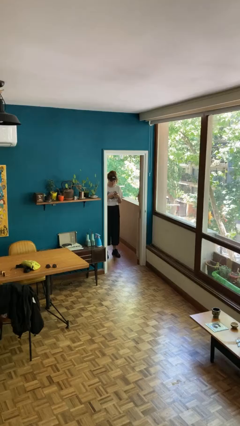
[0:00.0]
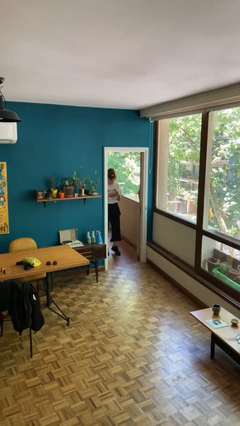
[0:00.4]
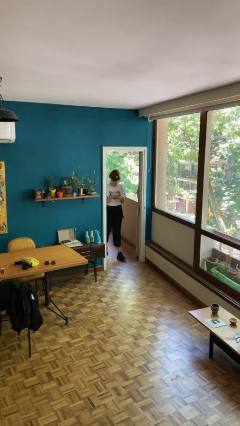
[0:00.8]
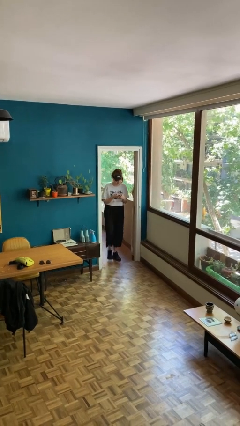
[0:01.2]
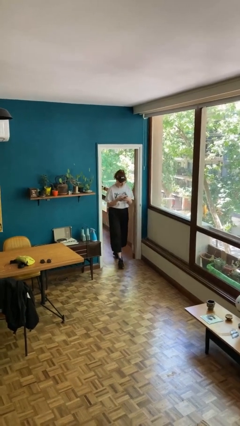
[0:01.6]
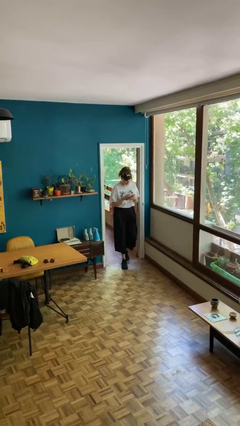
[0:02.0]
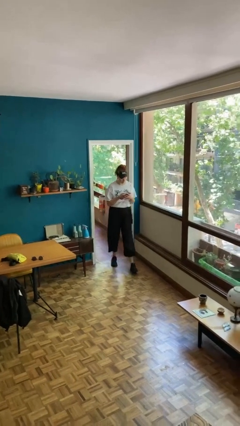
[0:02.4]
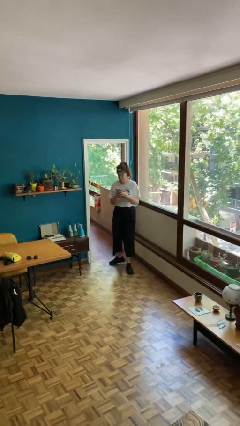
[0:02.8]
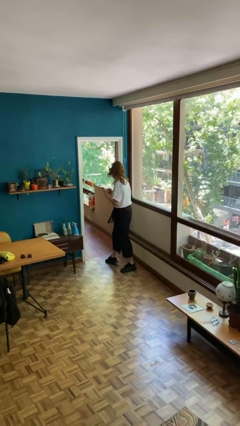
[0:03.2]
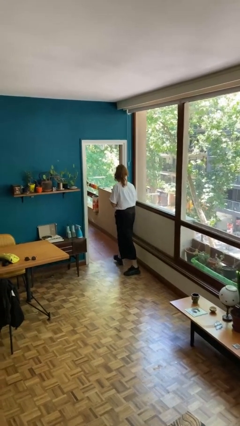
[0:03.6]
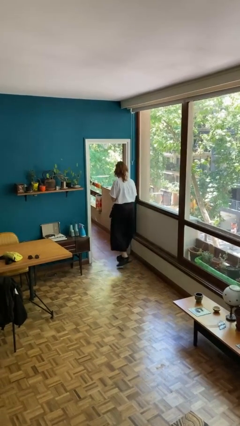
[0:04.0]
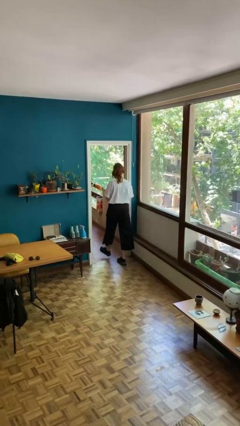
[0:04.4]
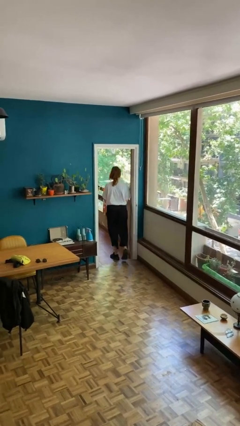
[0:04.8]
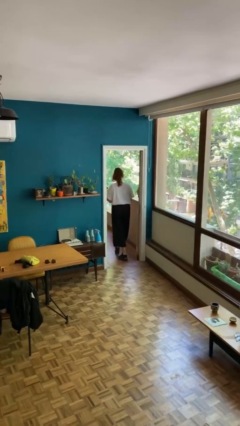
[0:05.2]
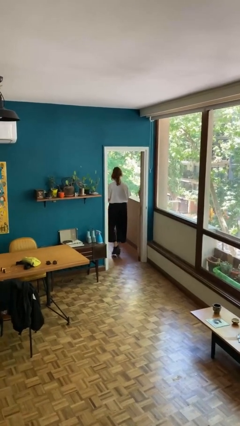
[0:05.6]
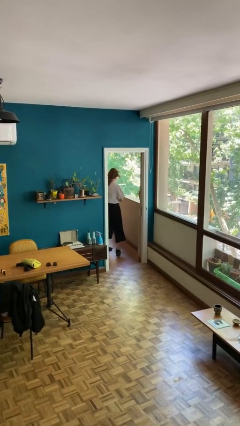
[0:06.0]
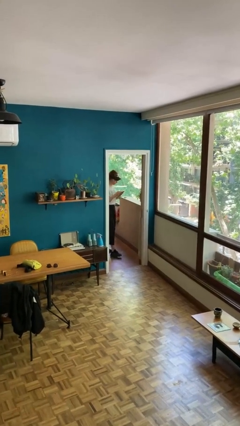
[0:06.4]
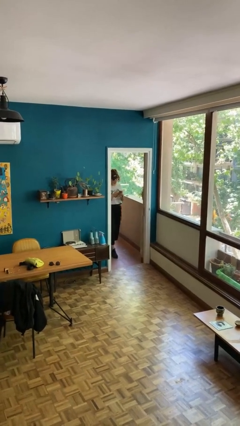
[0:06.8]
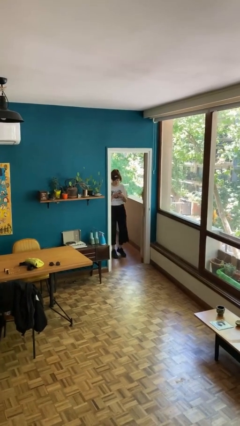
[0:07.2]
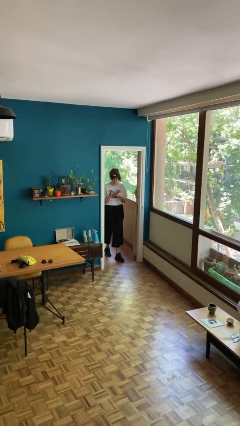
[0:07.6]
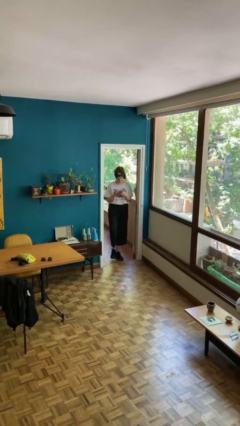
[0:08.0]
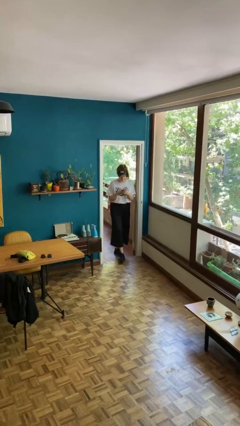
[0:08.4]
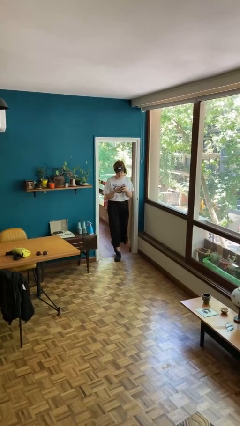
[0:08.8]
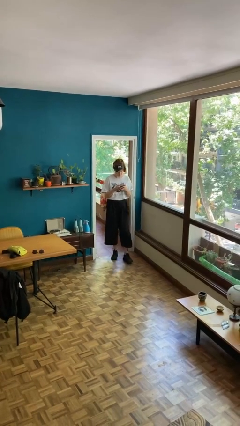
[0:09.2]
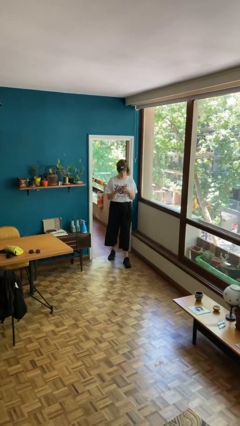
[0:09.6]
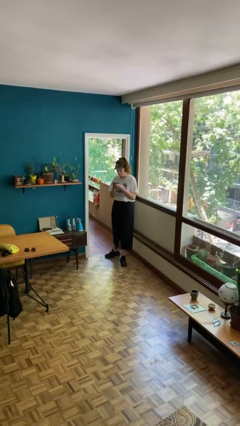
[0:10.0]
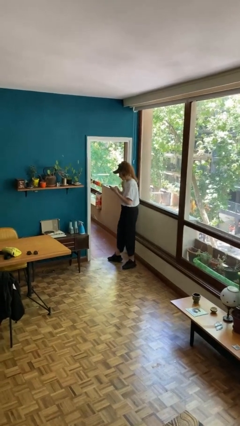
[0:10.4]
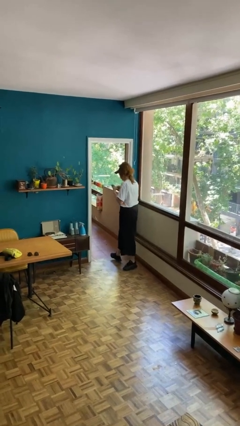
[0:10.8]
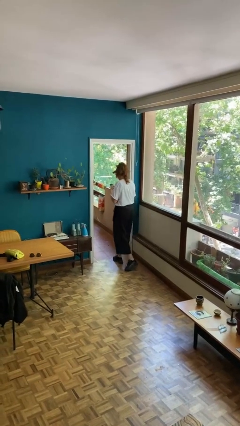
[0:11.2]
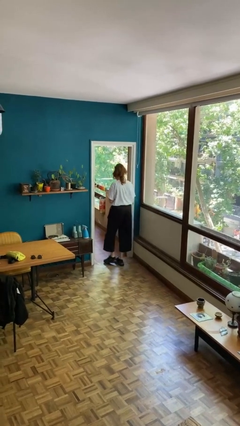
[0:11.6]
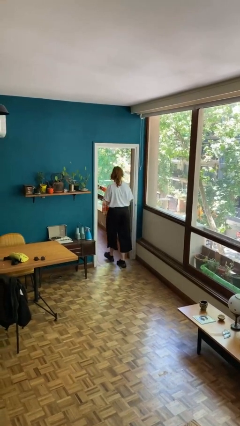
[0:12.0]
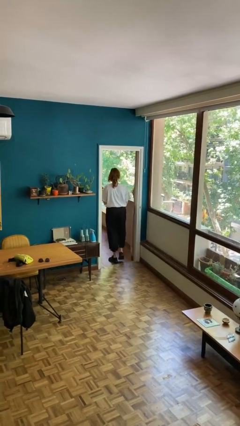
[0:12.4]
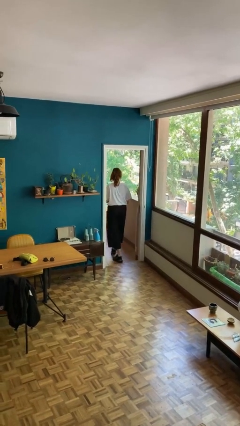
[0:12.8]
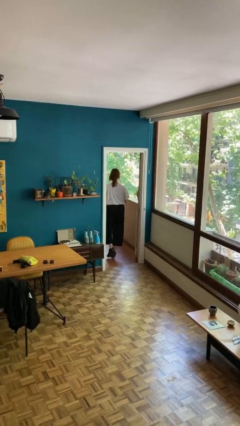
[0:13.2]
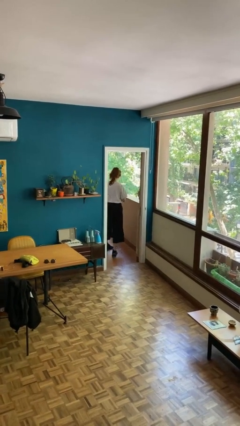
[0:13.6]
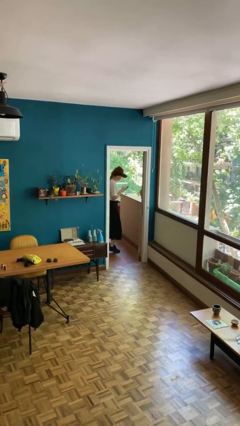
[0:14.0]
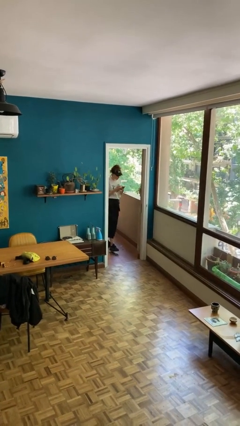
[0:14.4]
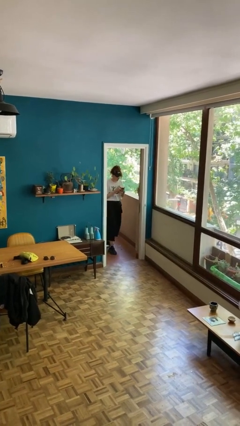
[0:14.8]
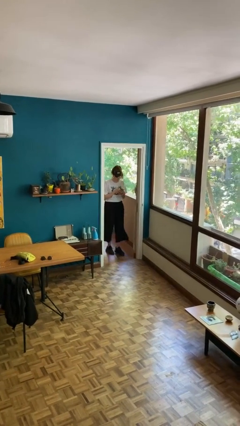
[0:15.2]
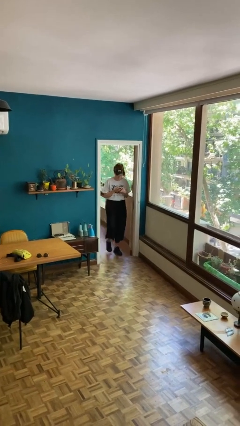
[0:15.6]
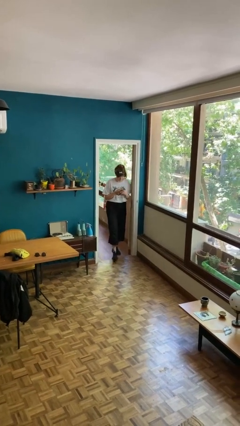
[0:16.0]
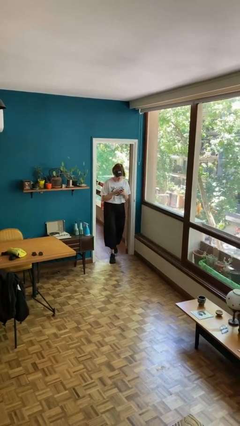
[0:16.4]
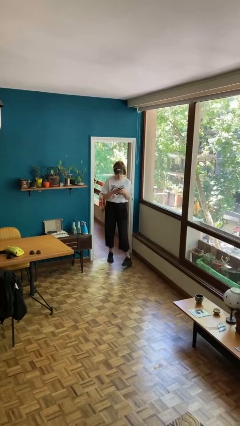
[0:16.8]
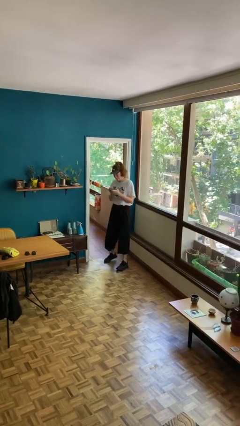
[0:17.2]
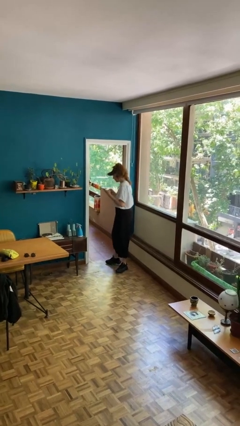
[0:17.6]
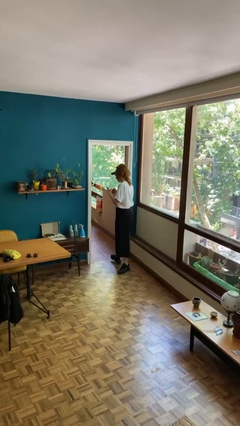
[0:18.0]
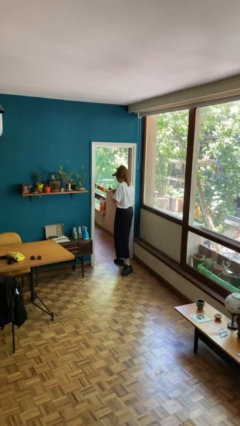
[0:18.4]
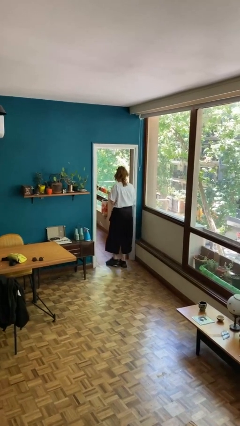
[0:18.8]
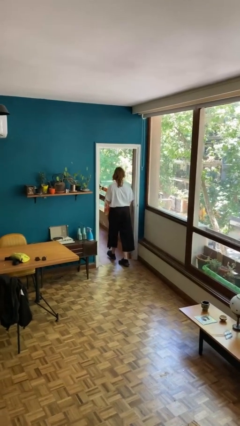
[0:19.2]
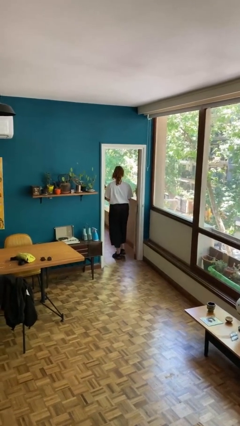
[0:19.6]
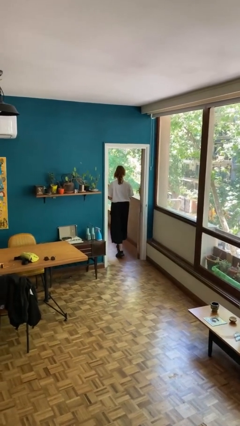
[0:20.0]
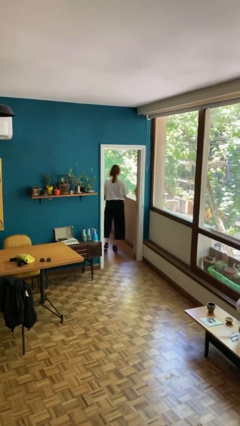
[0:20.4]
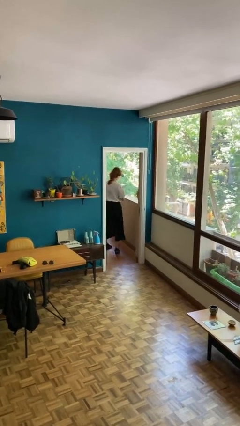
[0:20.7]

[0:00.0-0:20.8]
person texts on phone

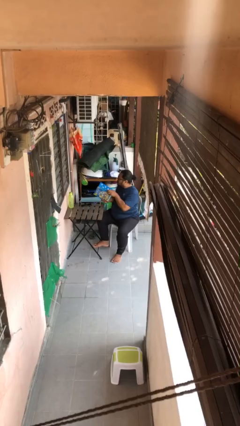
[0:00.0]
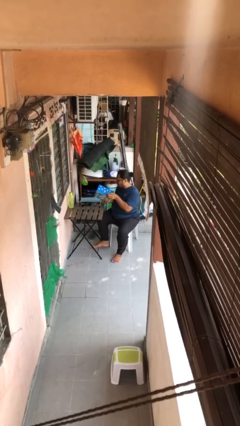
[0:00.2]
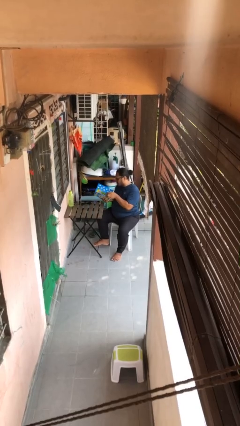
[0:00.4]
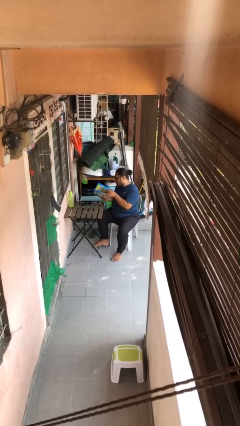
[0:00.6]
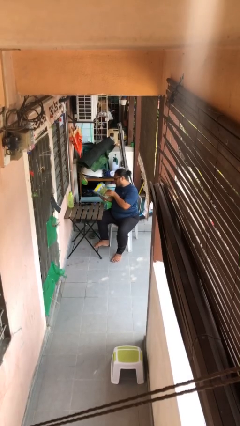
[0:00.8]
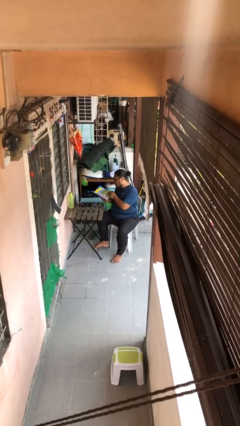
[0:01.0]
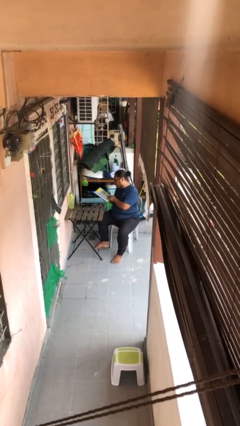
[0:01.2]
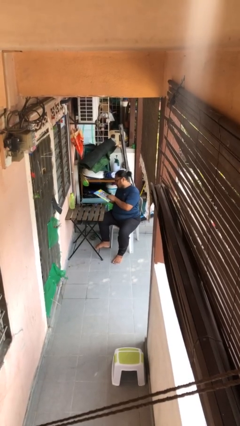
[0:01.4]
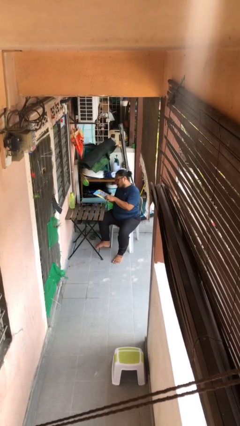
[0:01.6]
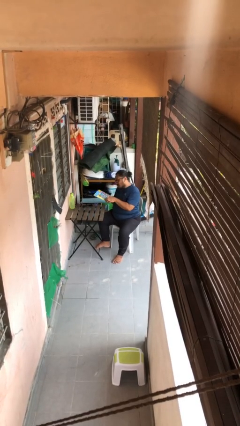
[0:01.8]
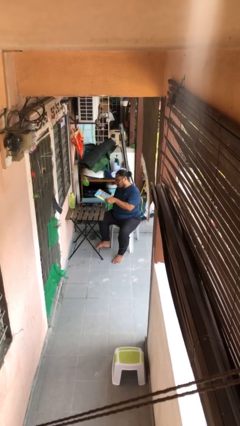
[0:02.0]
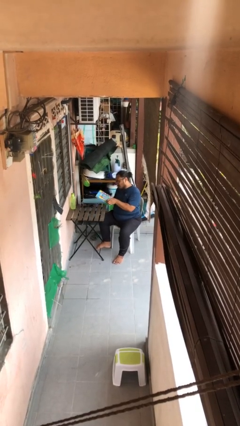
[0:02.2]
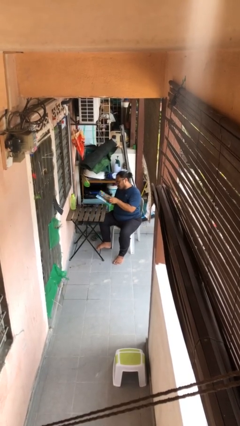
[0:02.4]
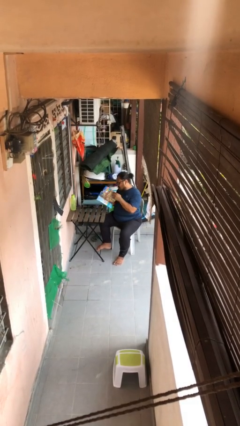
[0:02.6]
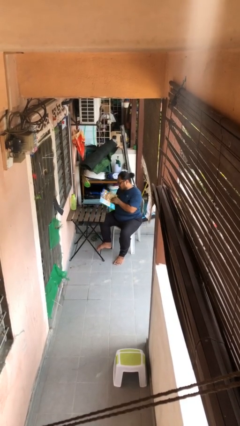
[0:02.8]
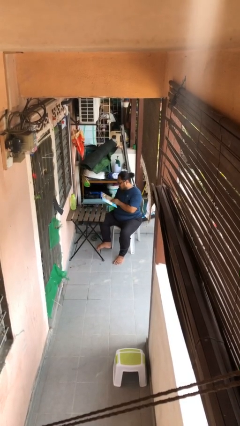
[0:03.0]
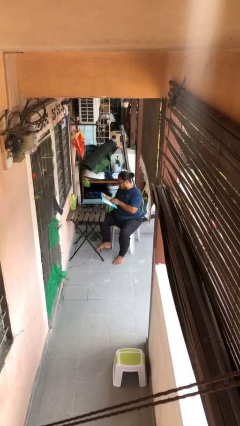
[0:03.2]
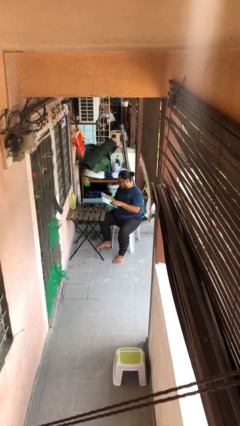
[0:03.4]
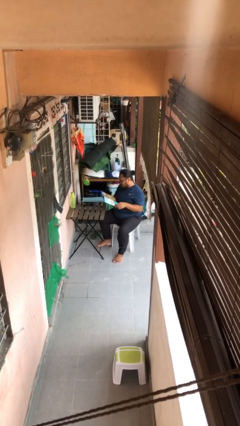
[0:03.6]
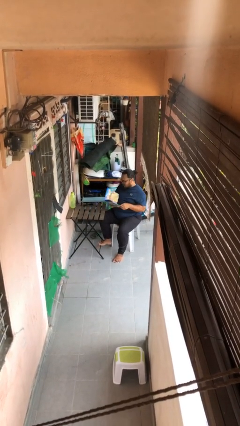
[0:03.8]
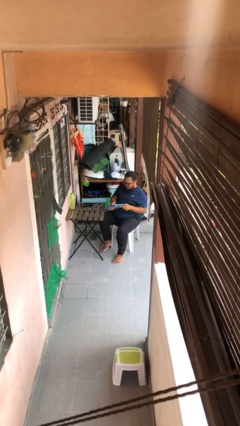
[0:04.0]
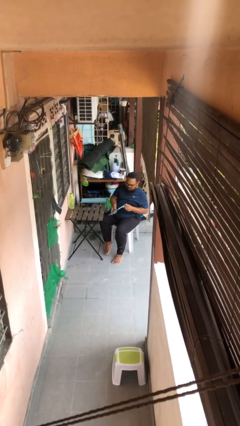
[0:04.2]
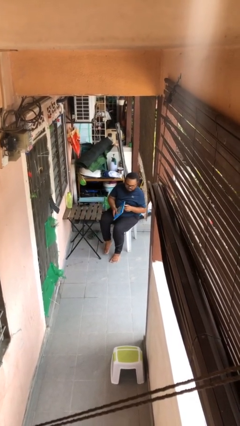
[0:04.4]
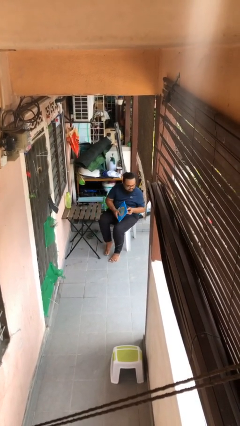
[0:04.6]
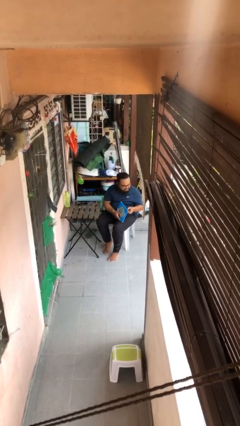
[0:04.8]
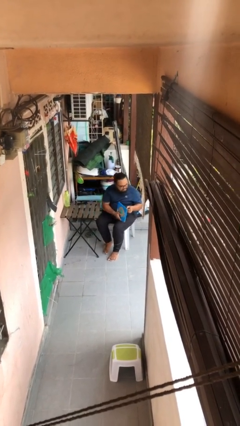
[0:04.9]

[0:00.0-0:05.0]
person reads document

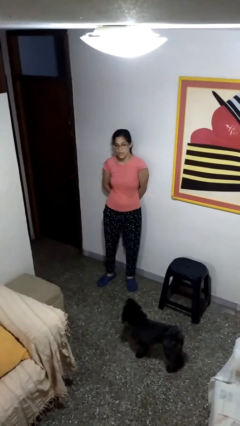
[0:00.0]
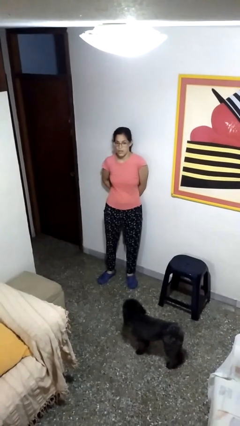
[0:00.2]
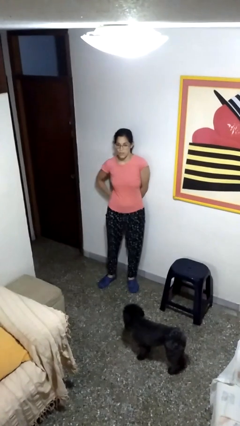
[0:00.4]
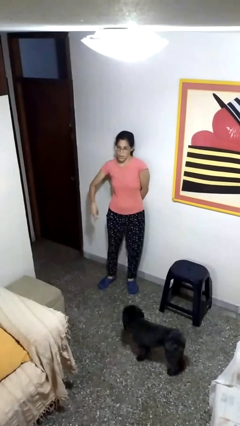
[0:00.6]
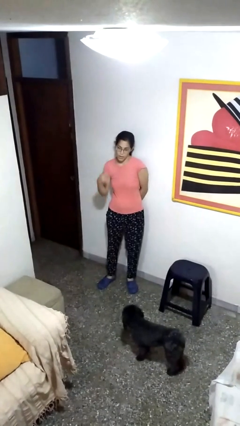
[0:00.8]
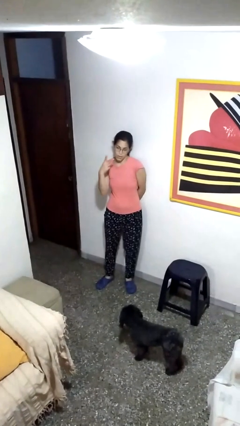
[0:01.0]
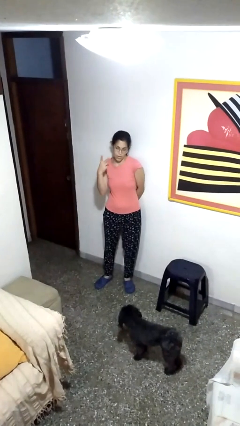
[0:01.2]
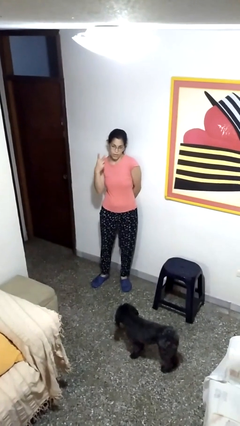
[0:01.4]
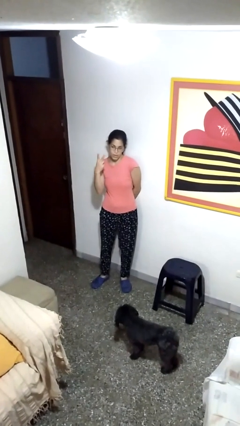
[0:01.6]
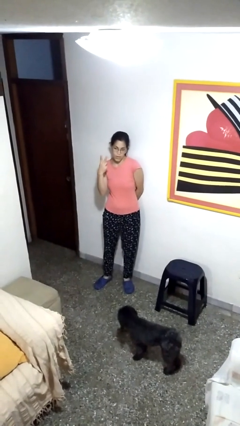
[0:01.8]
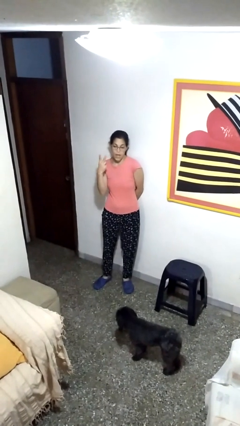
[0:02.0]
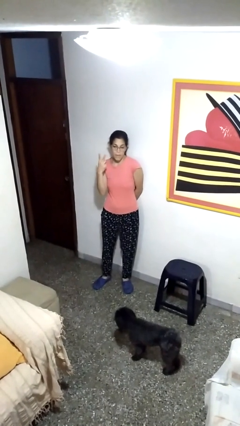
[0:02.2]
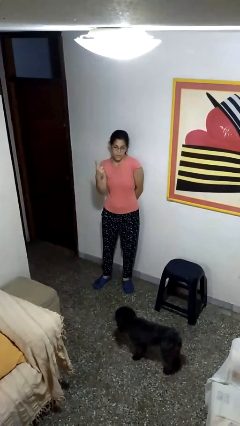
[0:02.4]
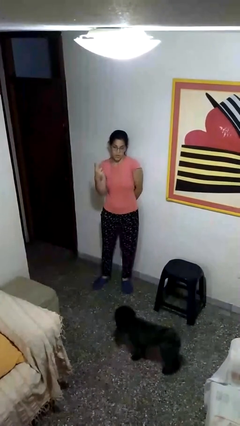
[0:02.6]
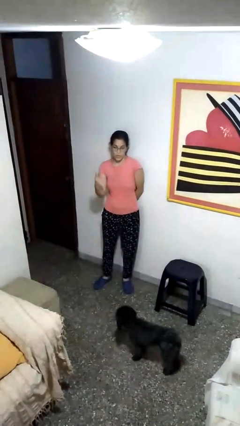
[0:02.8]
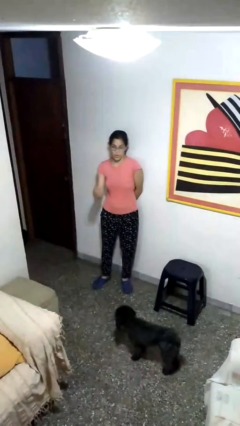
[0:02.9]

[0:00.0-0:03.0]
person gestures peace
